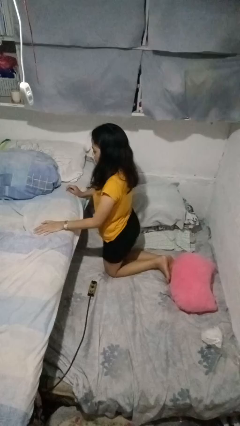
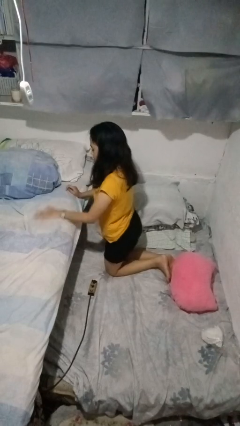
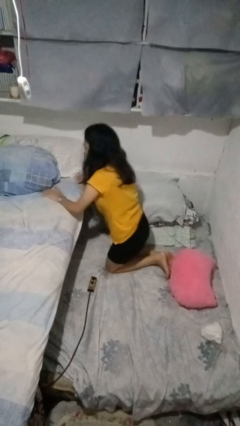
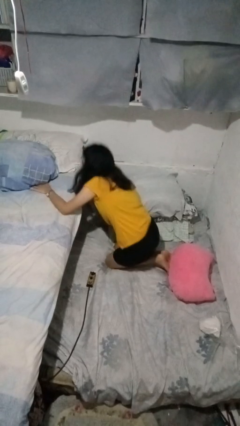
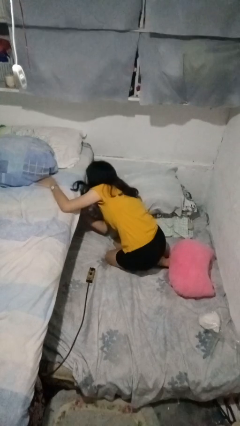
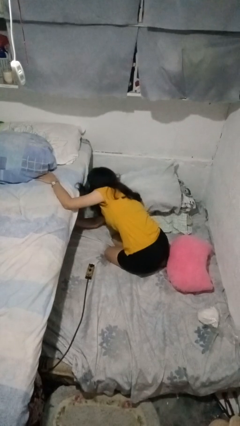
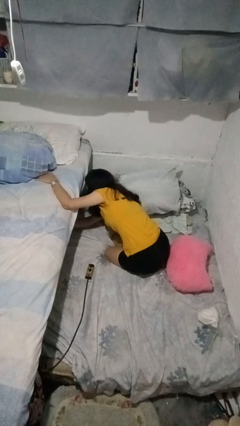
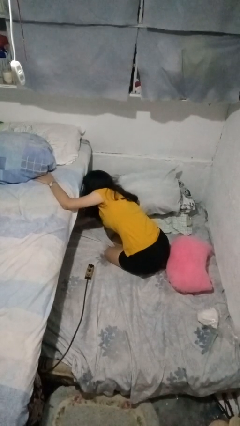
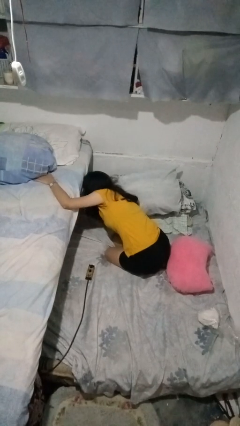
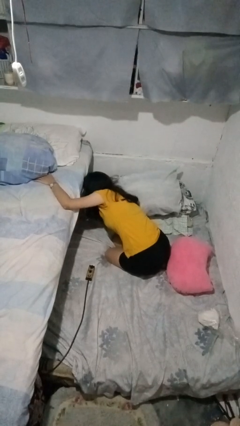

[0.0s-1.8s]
person searches under bed

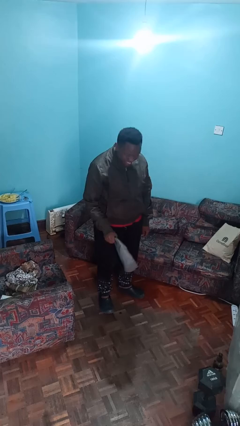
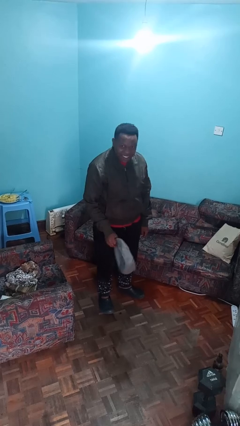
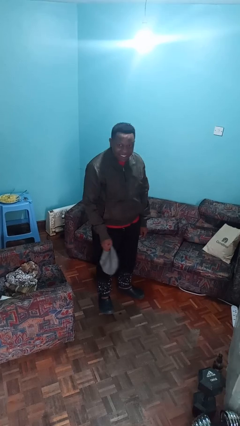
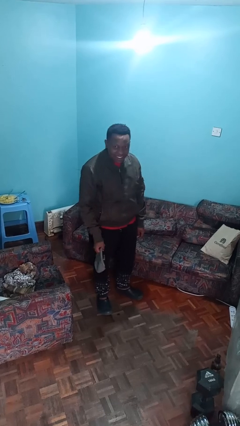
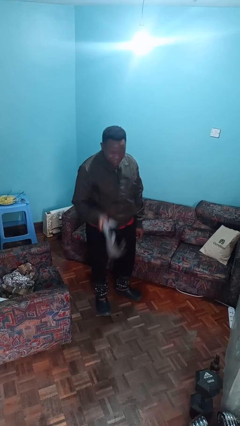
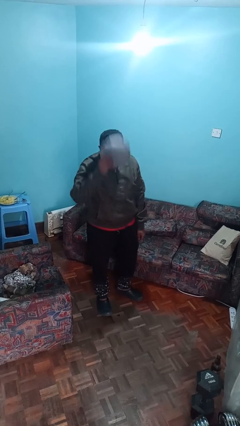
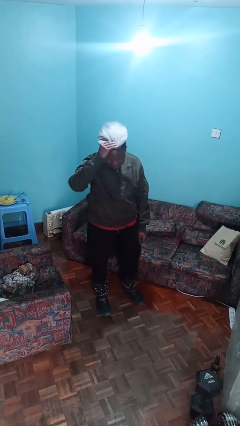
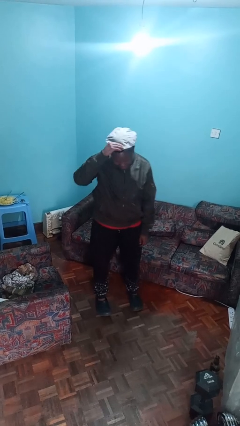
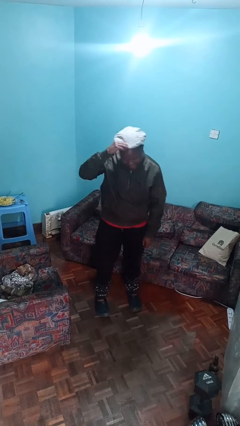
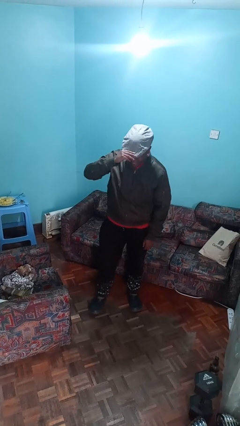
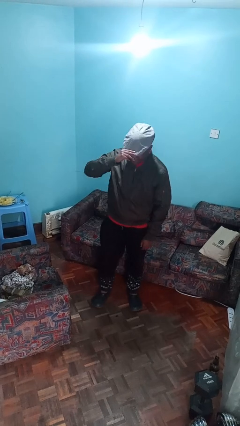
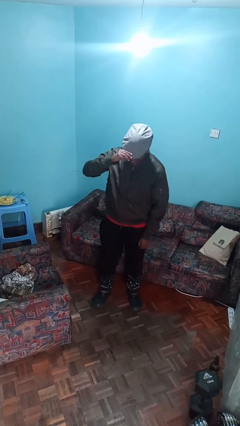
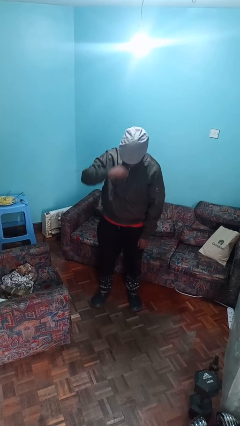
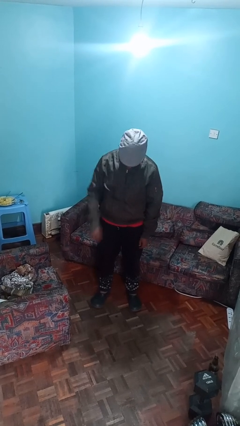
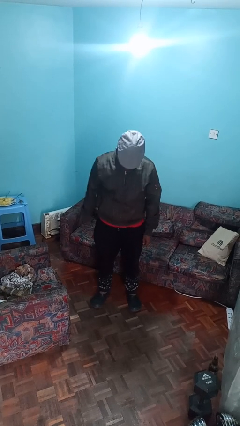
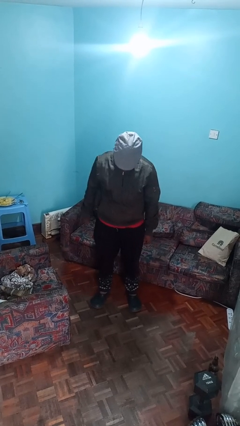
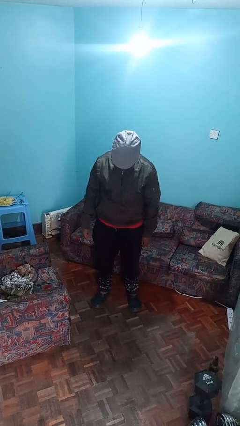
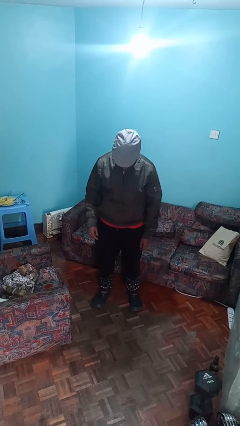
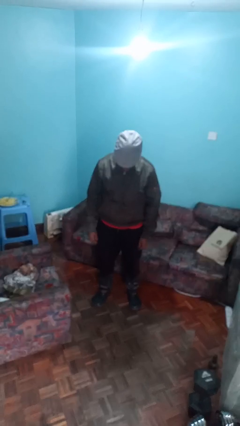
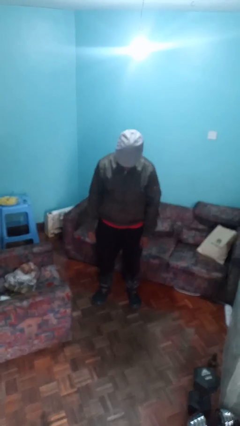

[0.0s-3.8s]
person puts on hat

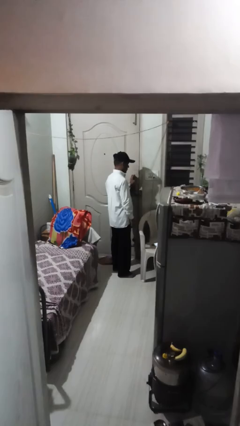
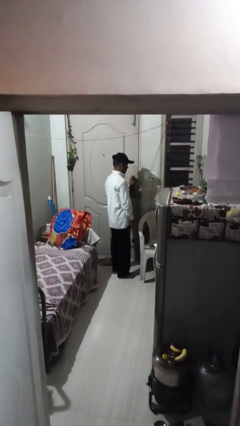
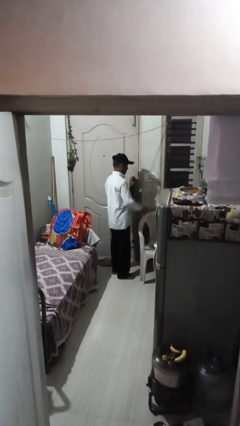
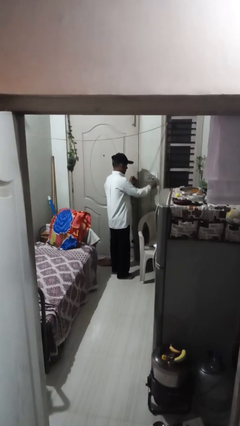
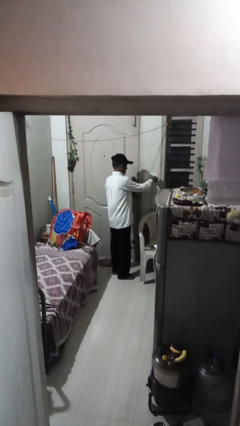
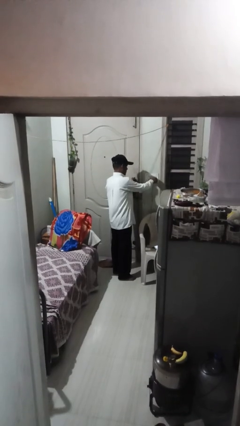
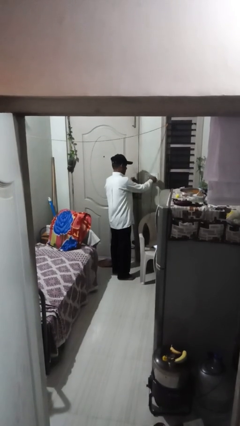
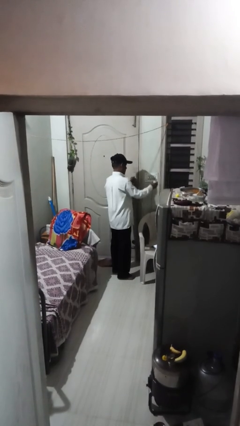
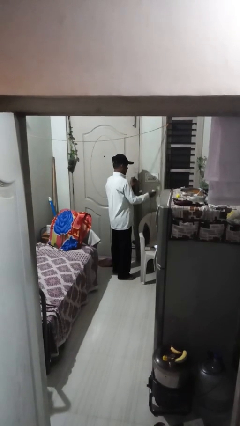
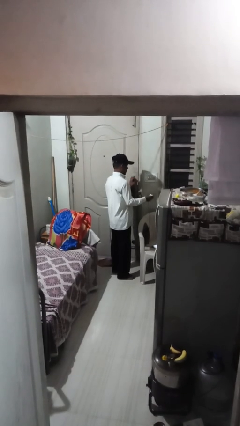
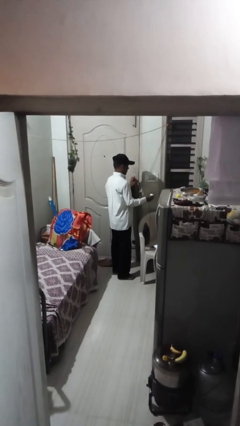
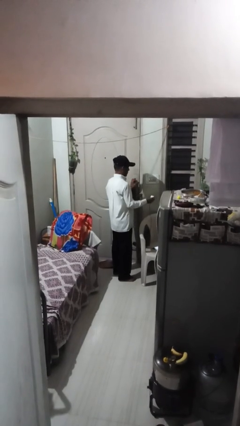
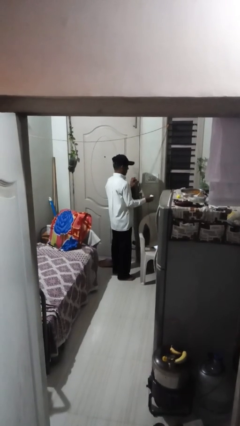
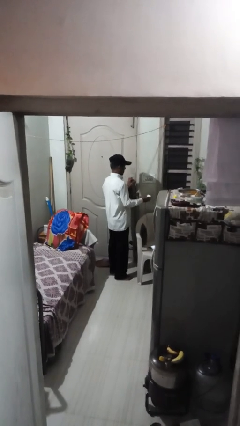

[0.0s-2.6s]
person unplugs from electrical socket

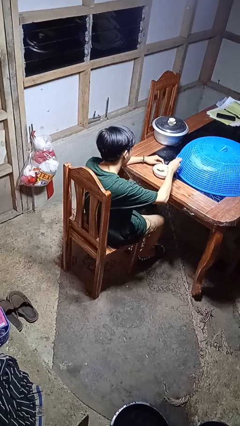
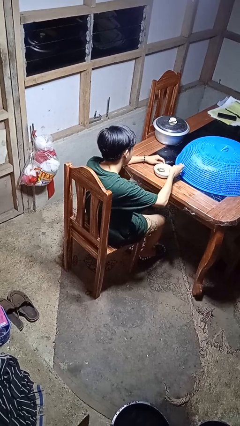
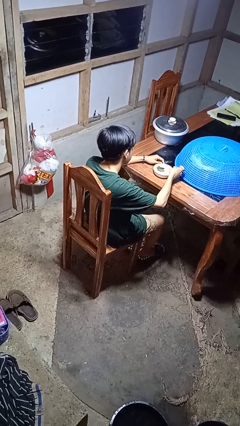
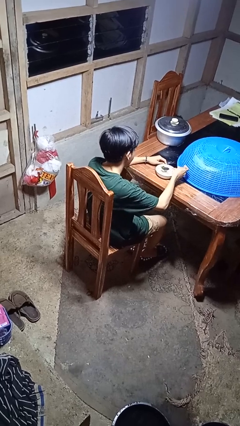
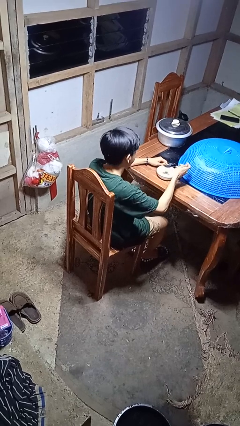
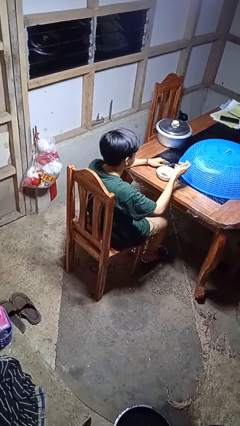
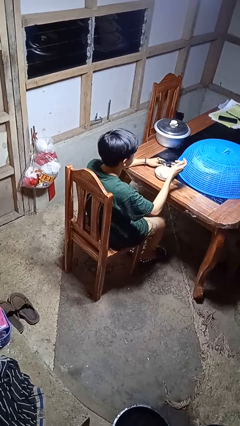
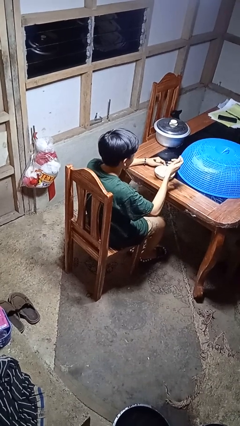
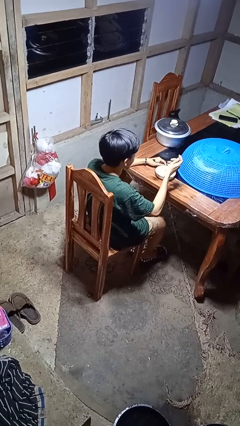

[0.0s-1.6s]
person eats with utensil

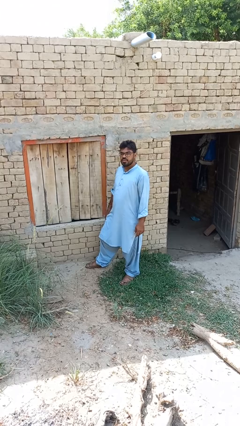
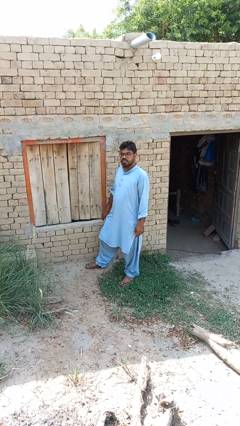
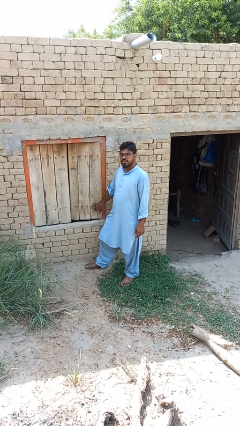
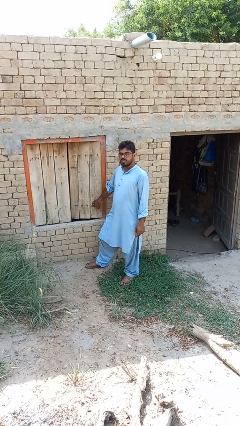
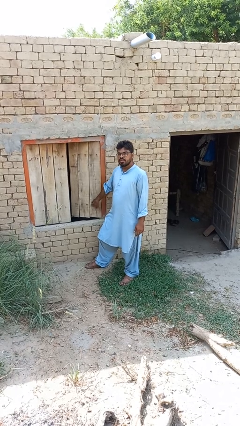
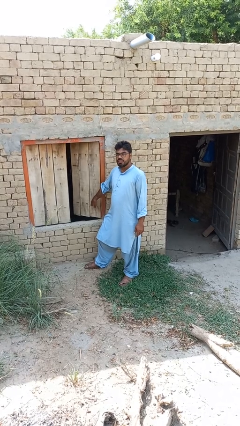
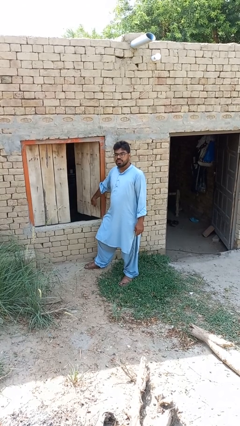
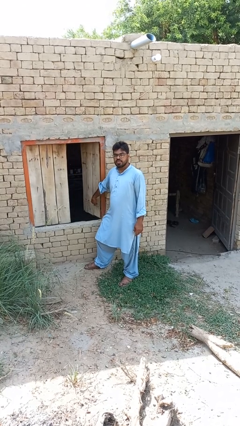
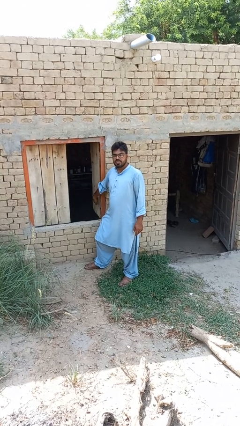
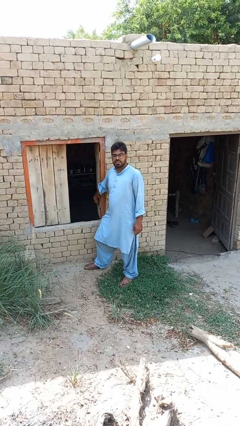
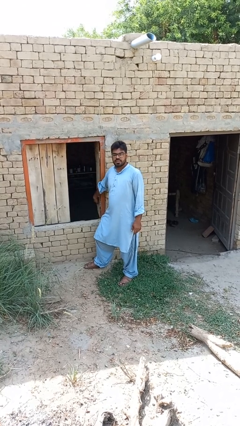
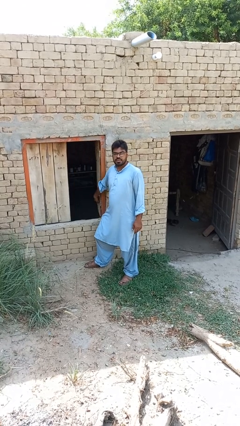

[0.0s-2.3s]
person opens home window

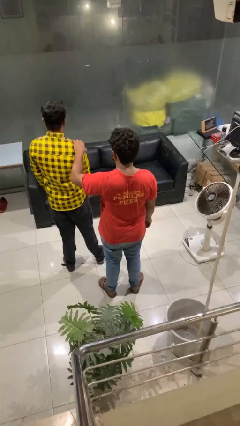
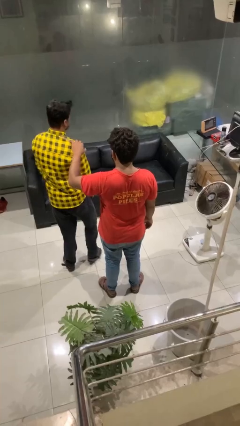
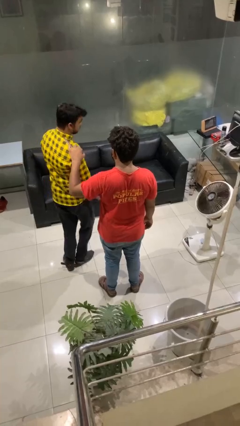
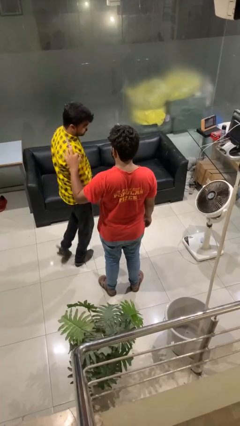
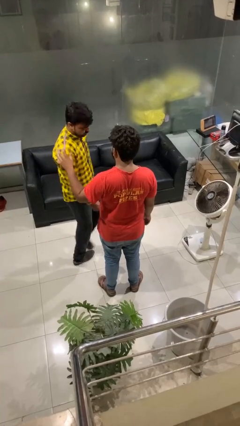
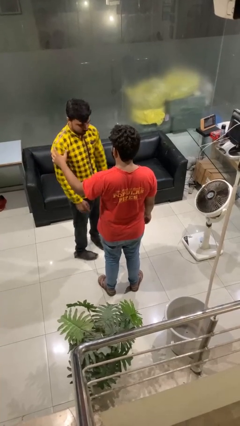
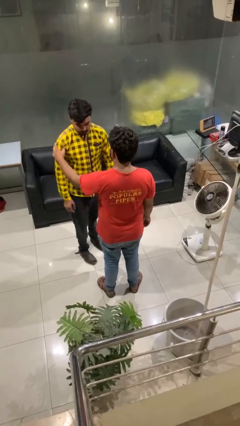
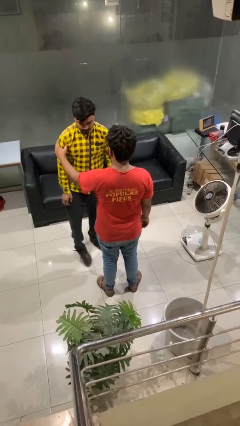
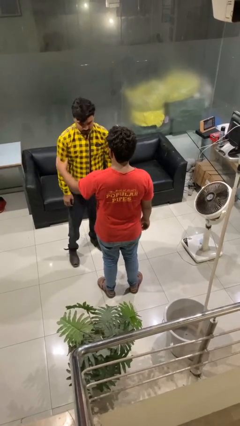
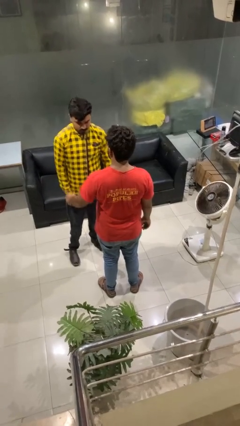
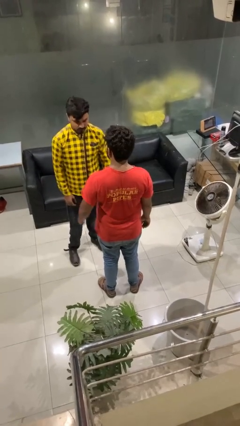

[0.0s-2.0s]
person spins person around

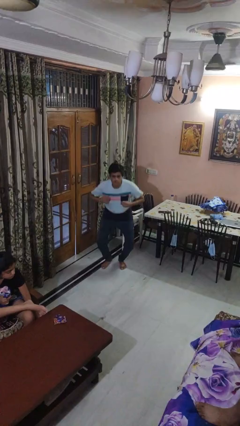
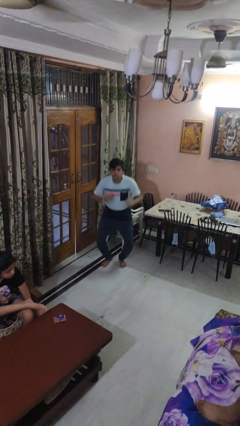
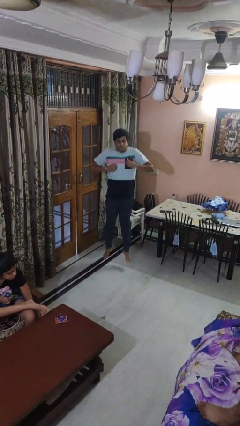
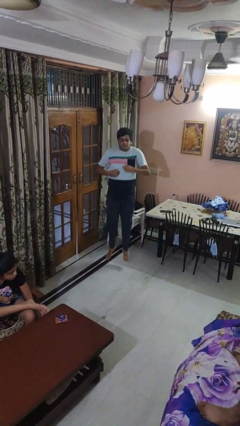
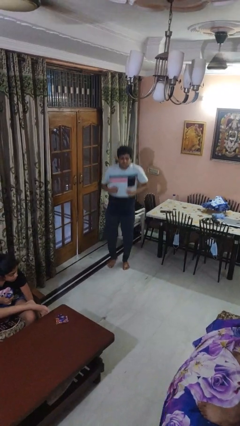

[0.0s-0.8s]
person jumps

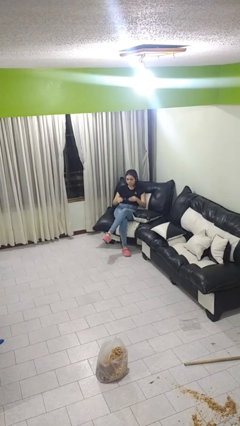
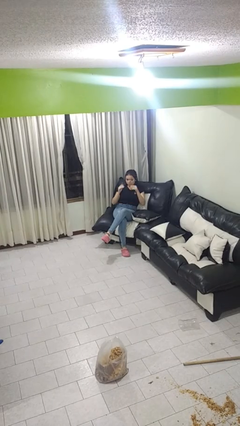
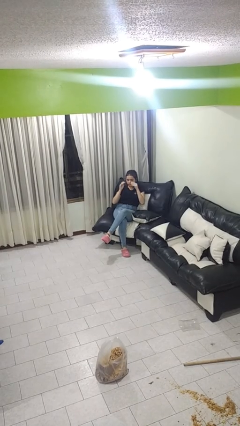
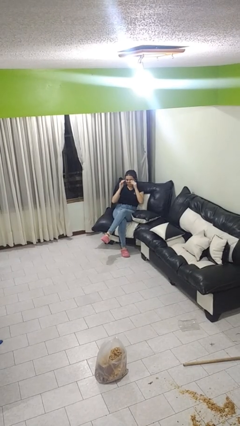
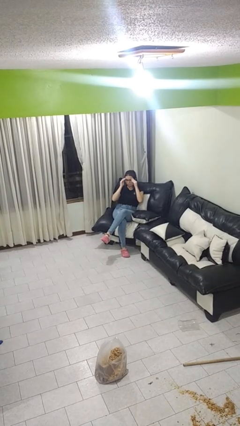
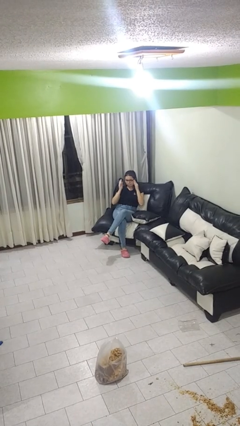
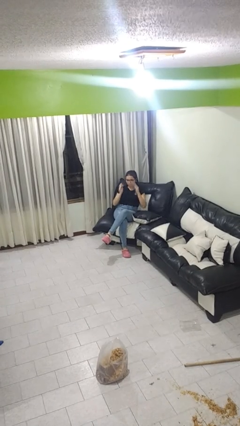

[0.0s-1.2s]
person puts on glasses

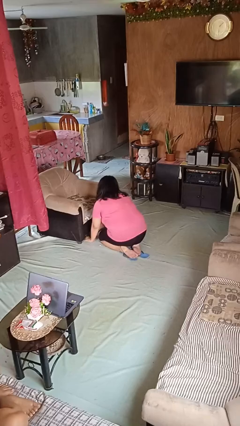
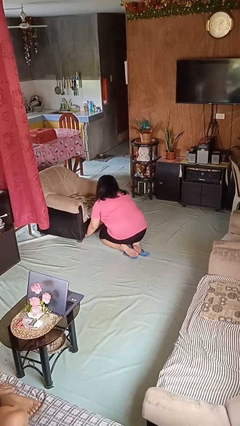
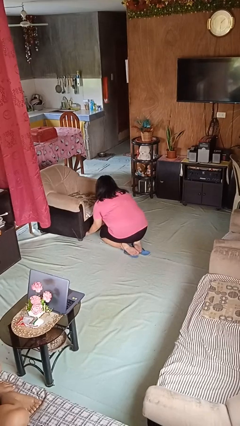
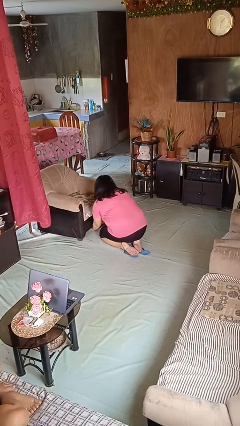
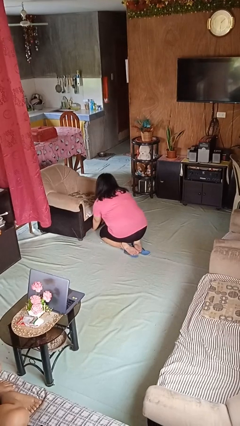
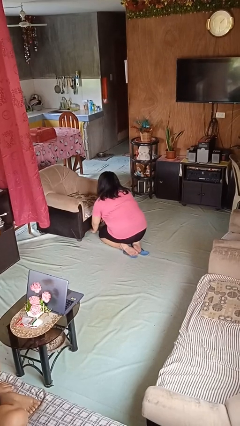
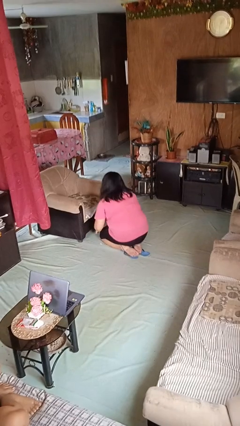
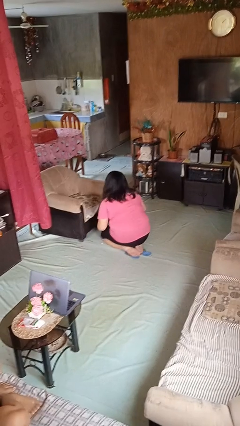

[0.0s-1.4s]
person searches under couch
